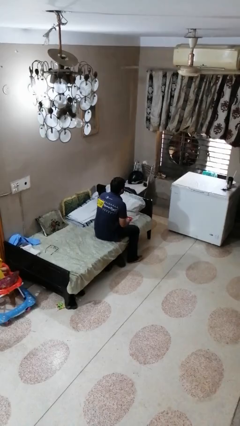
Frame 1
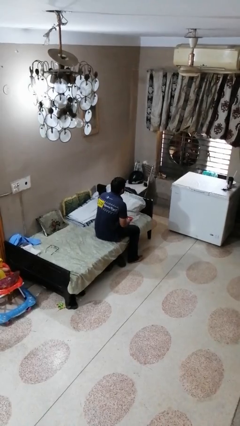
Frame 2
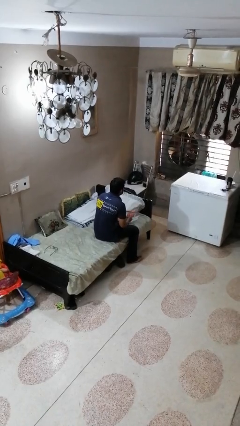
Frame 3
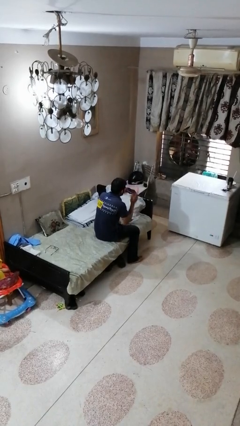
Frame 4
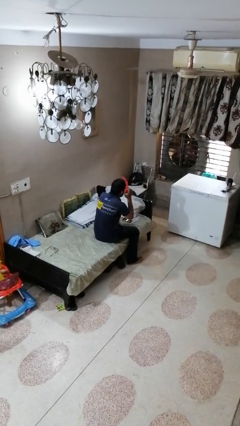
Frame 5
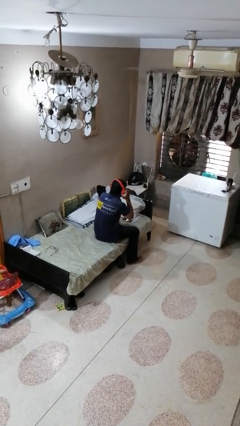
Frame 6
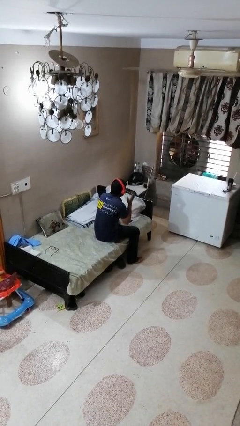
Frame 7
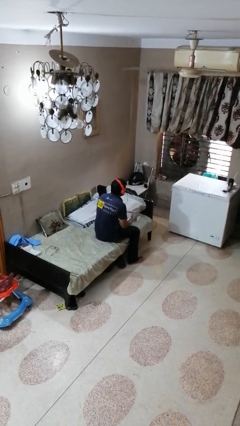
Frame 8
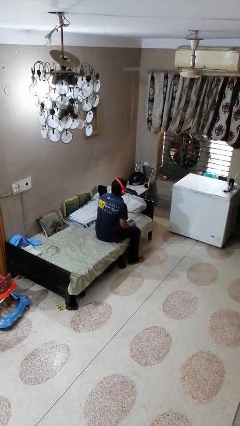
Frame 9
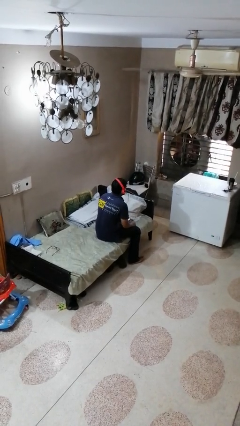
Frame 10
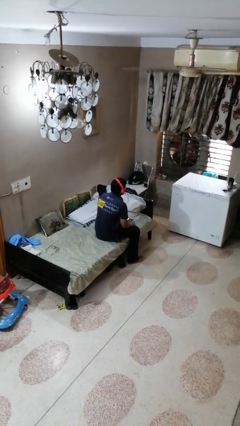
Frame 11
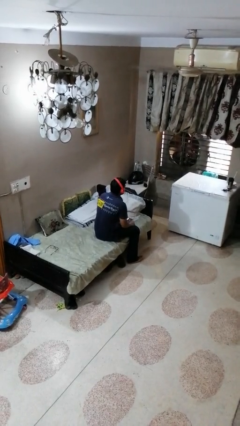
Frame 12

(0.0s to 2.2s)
person puts on headphones

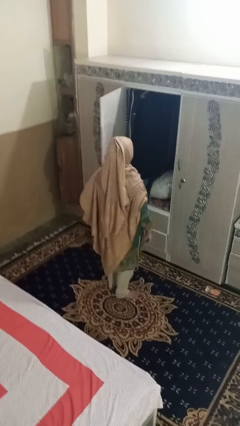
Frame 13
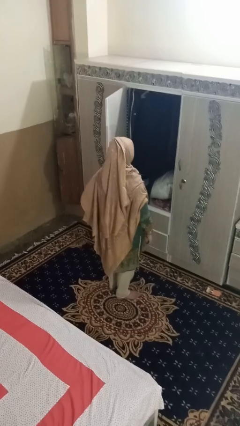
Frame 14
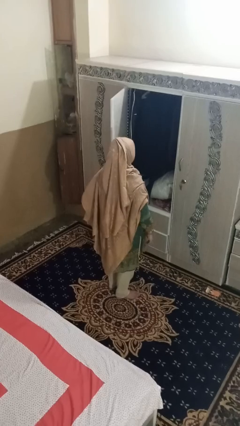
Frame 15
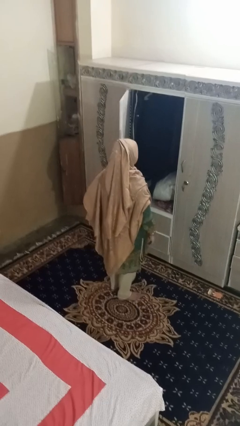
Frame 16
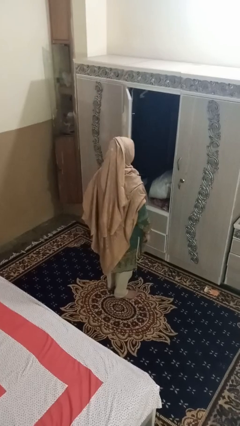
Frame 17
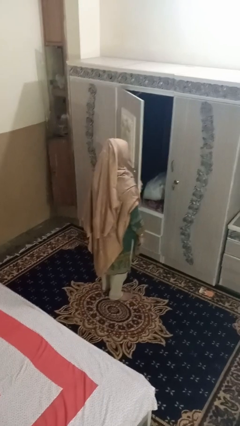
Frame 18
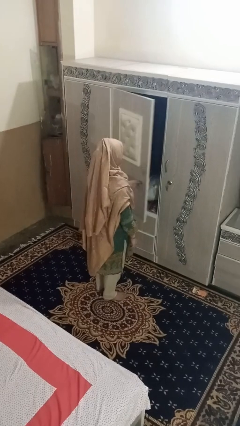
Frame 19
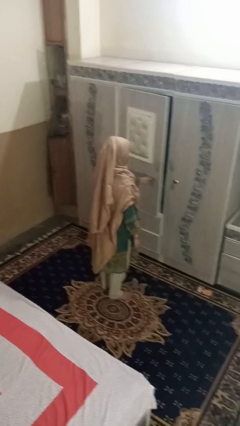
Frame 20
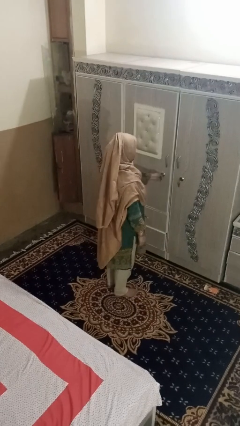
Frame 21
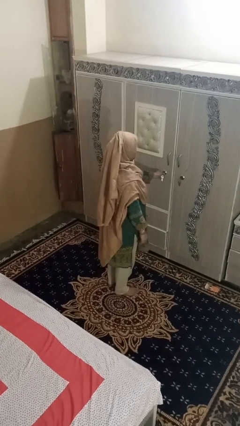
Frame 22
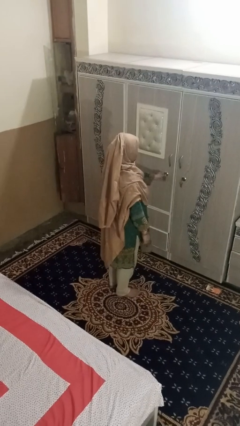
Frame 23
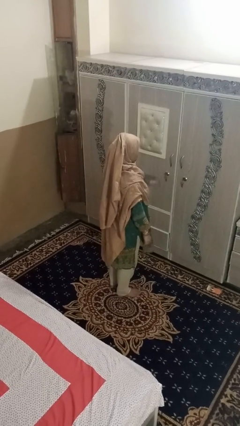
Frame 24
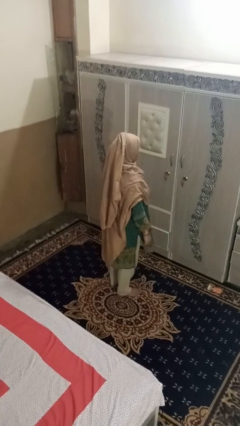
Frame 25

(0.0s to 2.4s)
person closes dresser drawer

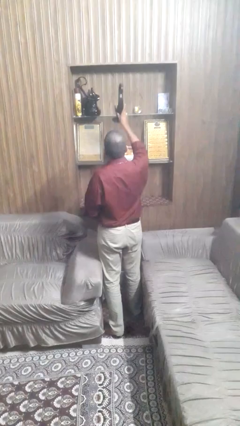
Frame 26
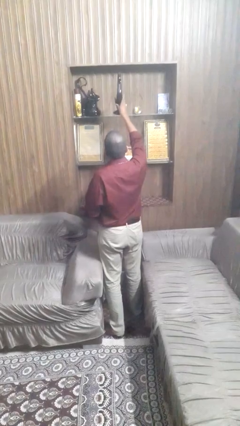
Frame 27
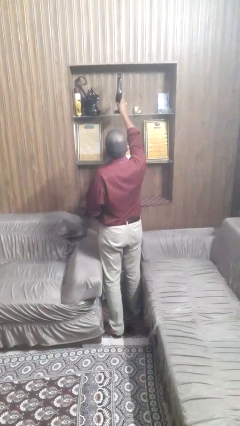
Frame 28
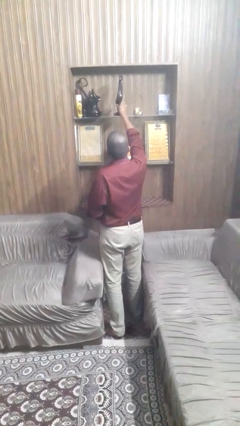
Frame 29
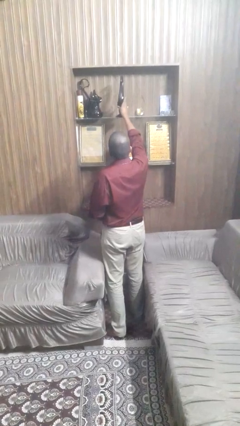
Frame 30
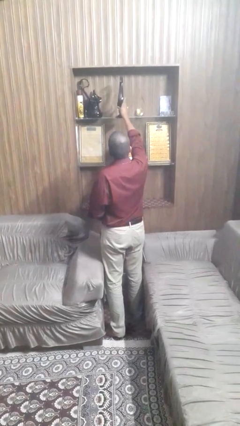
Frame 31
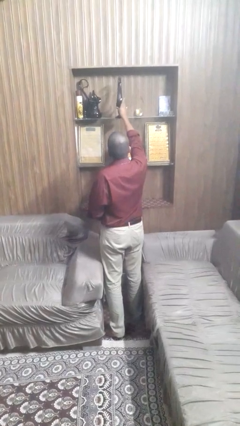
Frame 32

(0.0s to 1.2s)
person puts down object on shelf

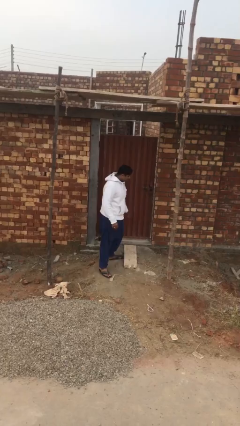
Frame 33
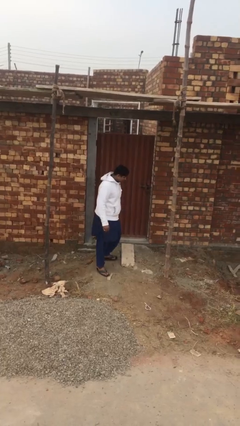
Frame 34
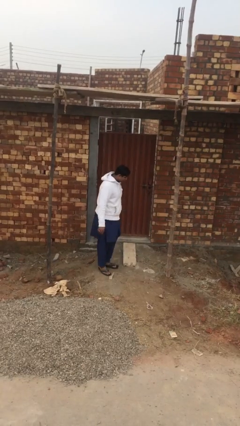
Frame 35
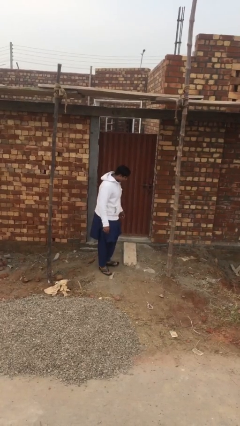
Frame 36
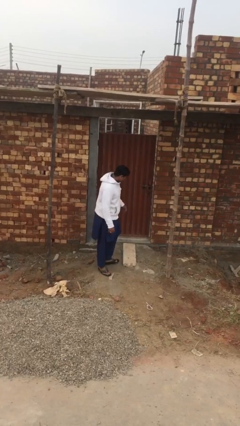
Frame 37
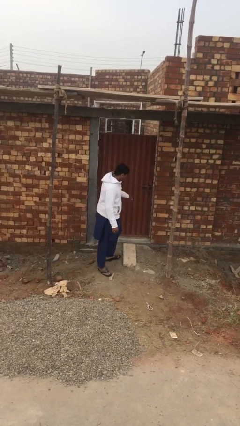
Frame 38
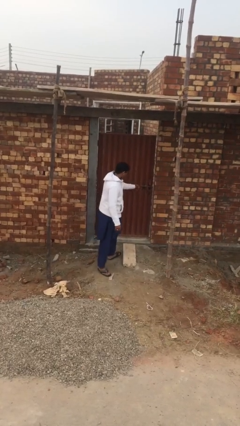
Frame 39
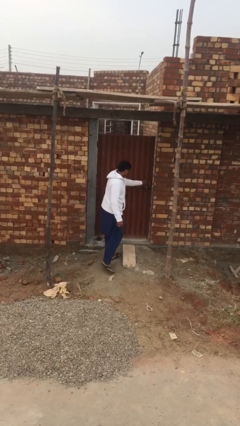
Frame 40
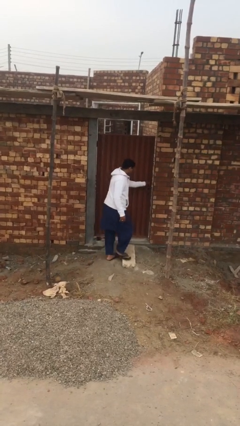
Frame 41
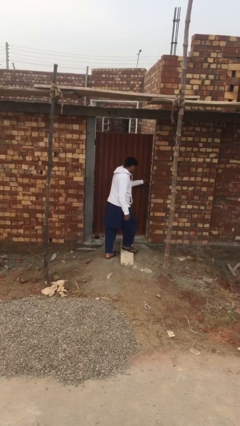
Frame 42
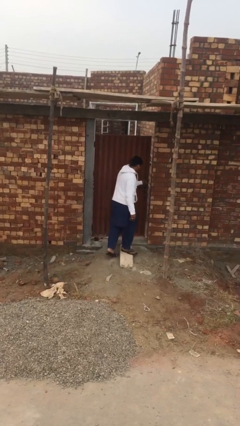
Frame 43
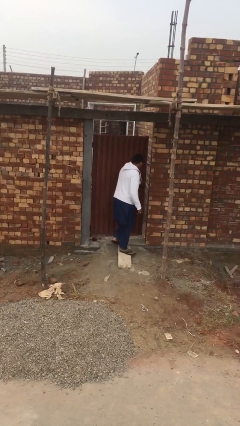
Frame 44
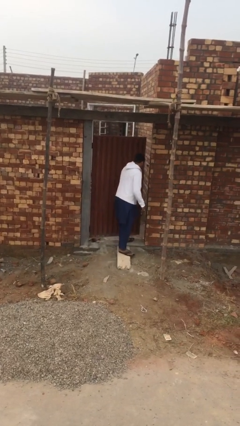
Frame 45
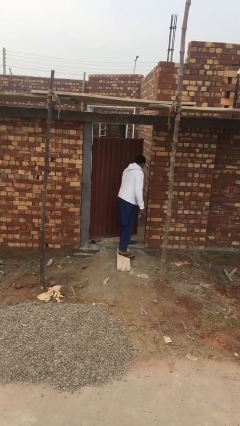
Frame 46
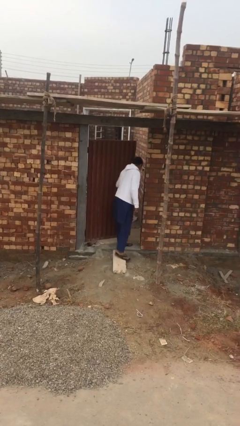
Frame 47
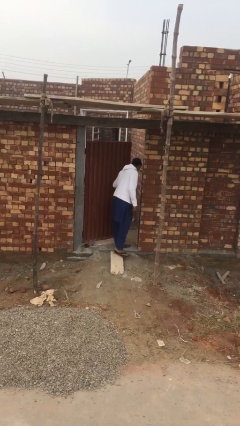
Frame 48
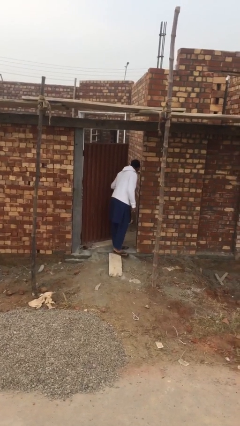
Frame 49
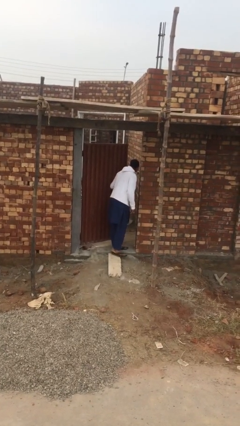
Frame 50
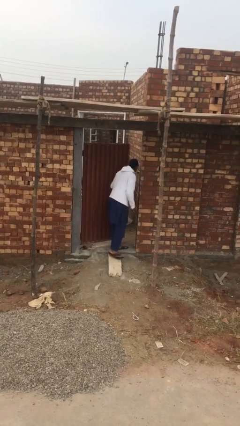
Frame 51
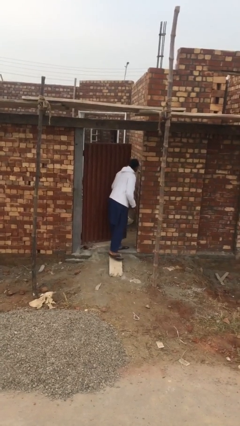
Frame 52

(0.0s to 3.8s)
person opens facility door

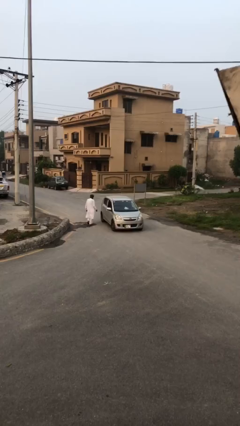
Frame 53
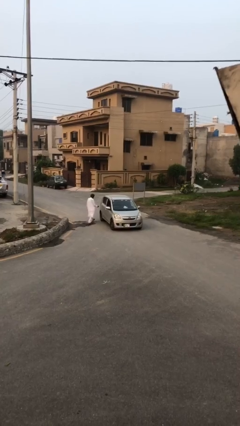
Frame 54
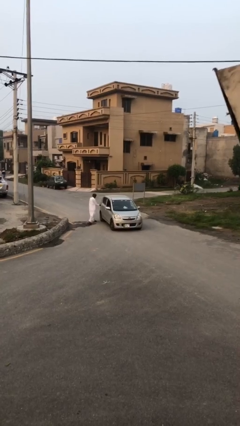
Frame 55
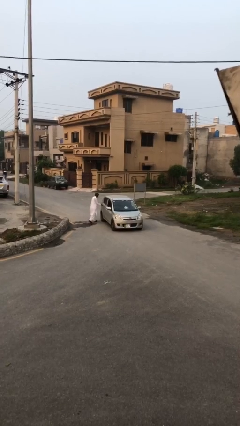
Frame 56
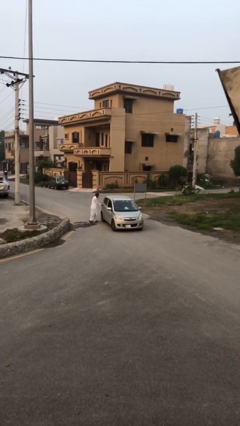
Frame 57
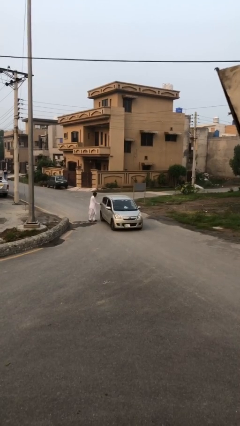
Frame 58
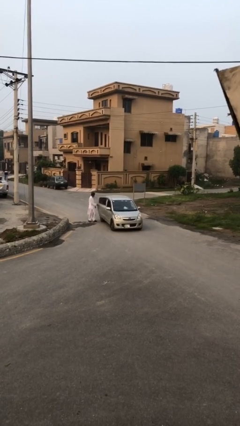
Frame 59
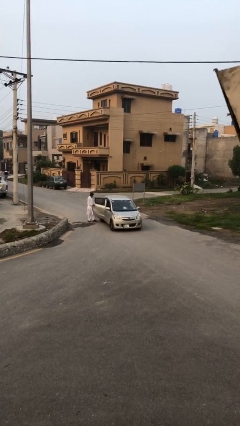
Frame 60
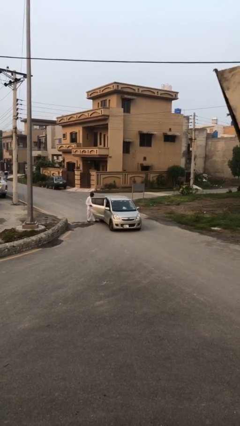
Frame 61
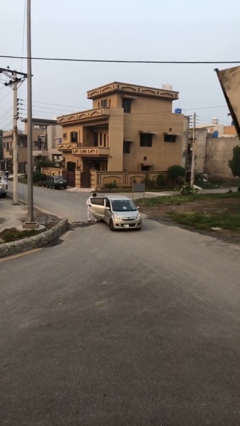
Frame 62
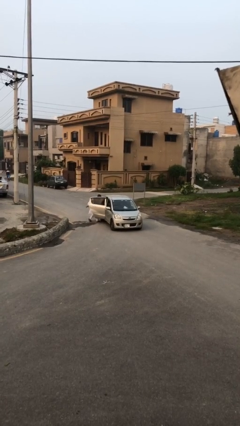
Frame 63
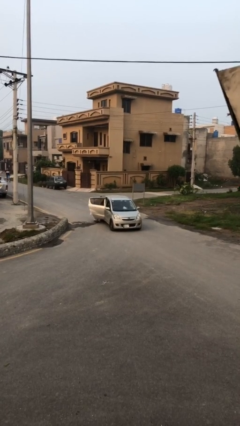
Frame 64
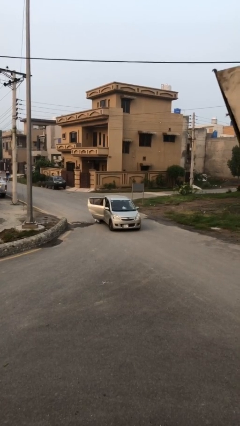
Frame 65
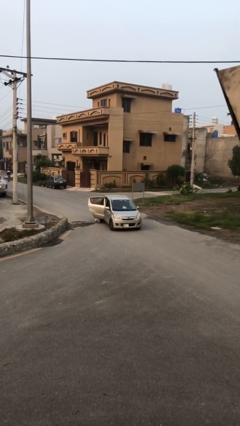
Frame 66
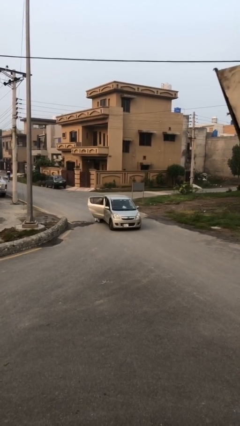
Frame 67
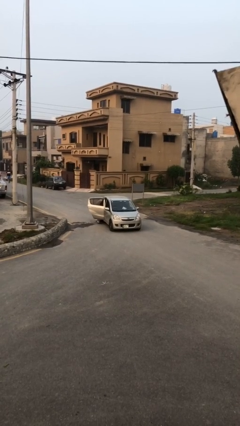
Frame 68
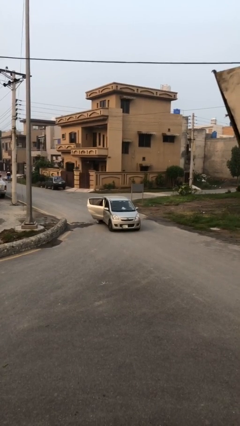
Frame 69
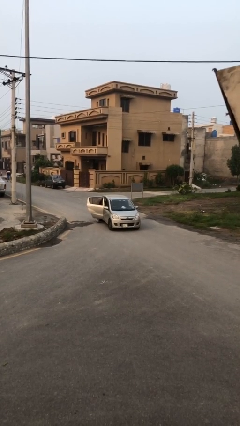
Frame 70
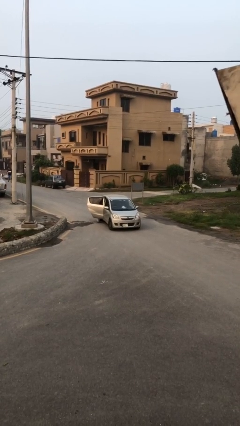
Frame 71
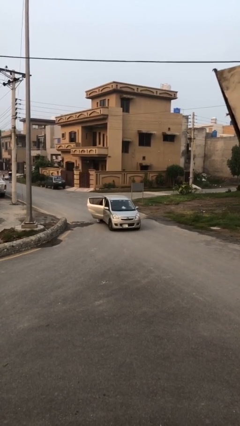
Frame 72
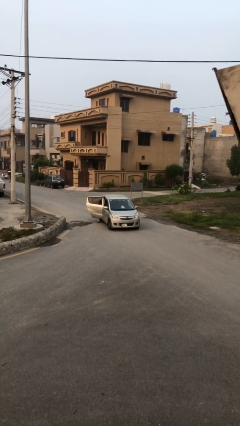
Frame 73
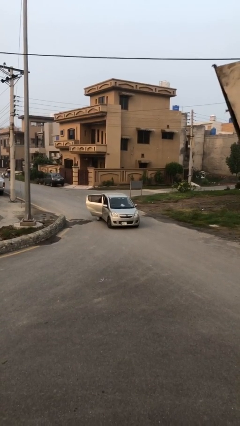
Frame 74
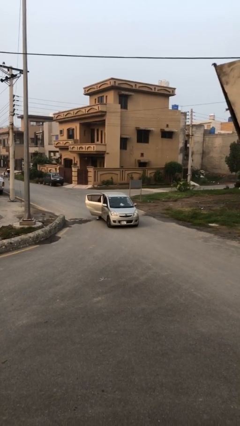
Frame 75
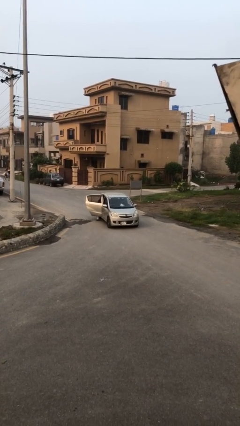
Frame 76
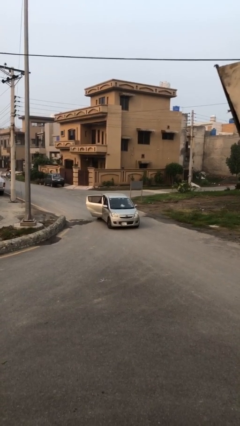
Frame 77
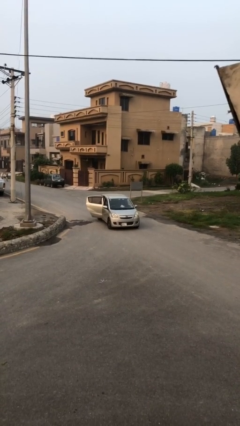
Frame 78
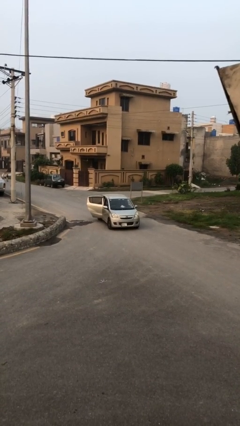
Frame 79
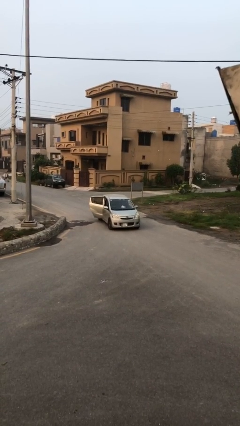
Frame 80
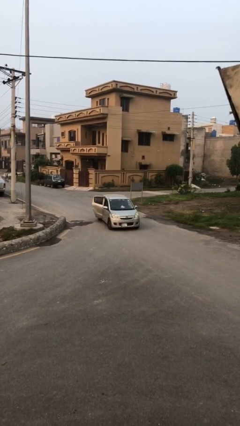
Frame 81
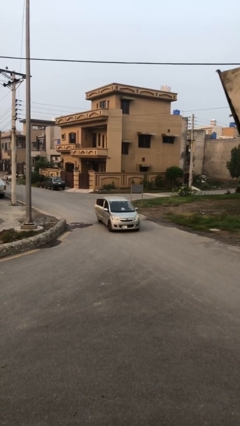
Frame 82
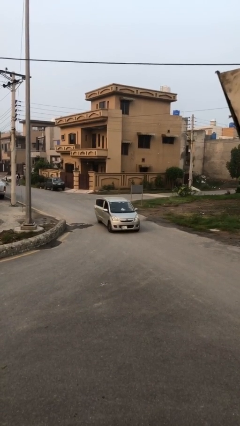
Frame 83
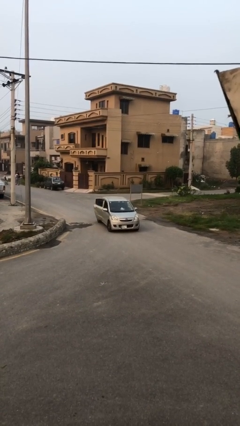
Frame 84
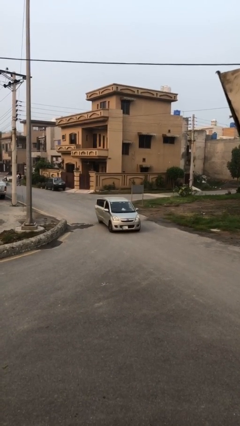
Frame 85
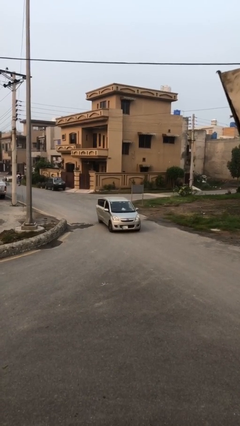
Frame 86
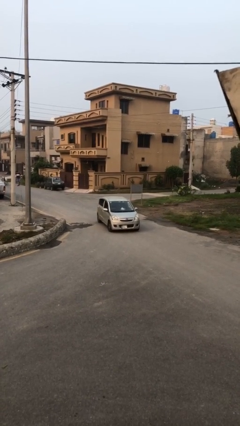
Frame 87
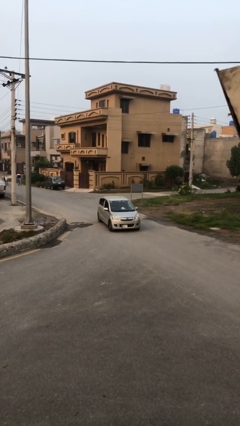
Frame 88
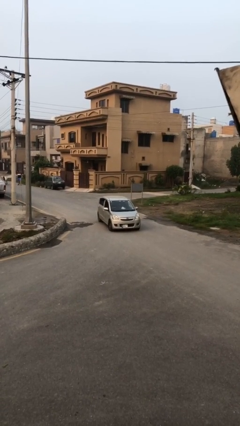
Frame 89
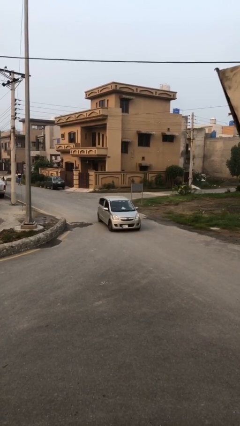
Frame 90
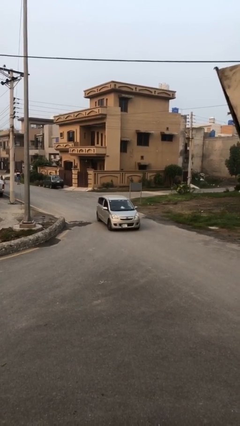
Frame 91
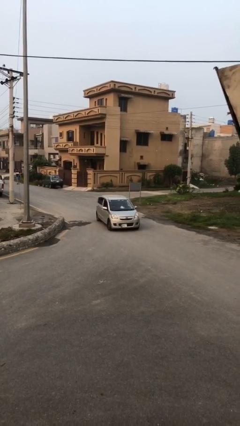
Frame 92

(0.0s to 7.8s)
car picks up person

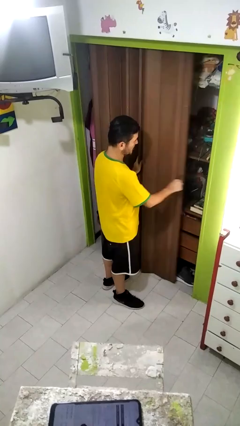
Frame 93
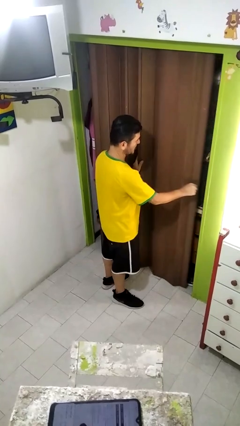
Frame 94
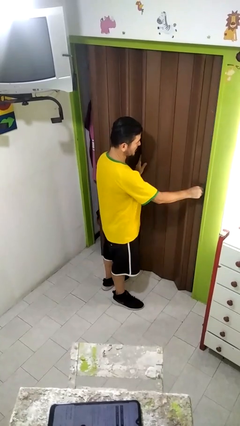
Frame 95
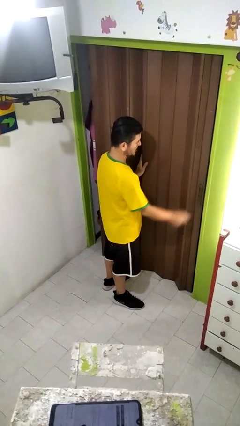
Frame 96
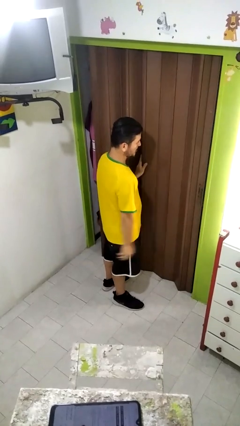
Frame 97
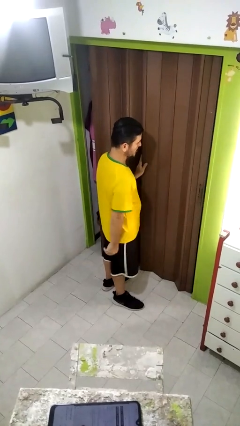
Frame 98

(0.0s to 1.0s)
person closes closet door
